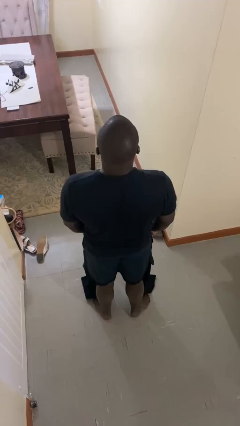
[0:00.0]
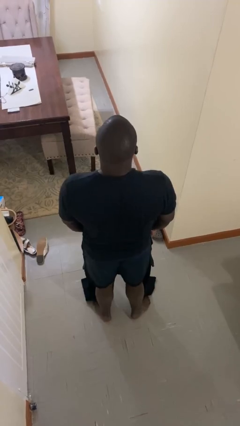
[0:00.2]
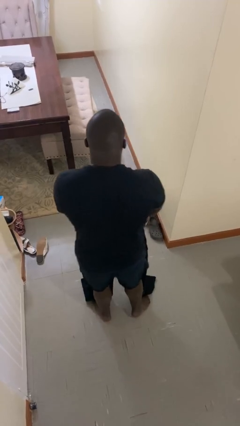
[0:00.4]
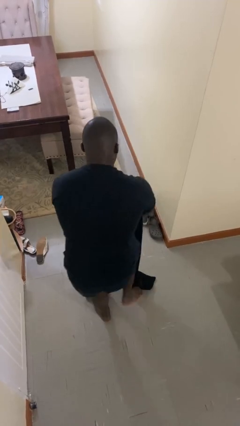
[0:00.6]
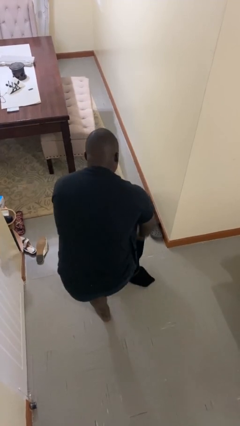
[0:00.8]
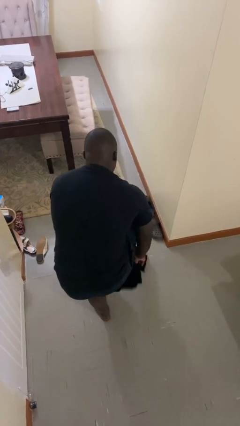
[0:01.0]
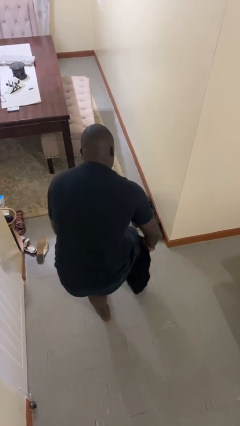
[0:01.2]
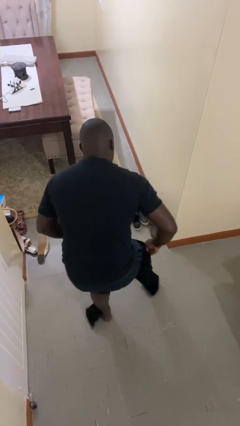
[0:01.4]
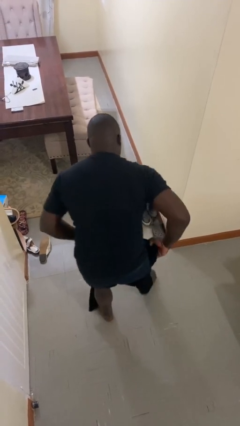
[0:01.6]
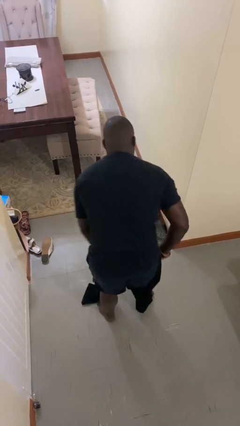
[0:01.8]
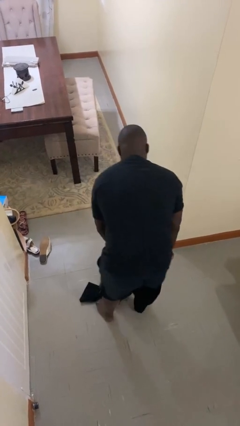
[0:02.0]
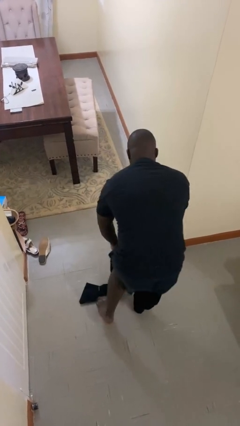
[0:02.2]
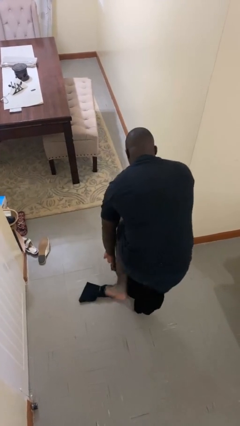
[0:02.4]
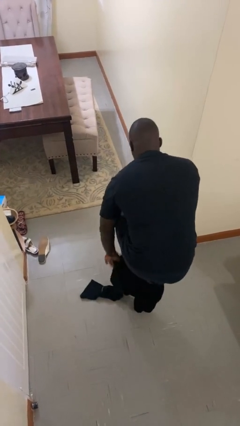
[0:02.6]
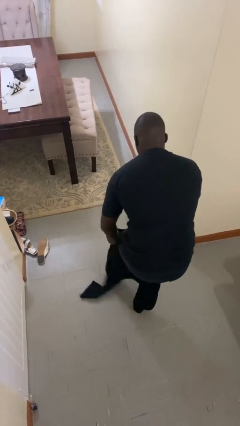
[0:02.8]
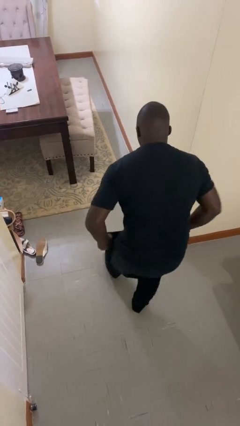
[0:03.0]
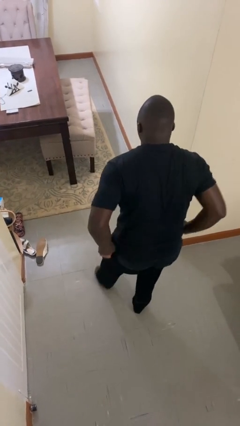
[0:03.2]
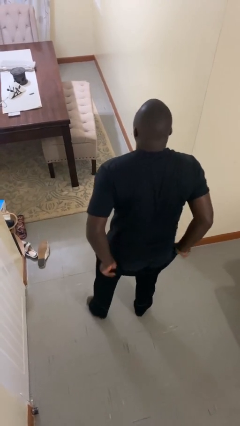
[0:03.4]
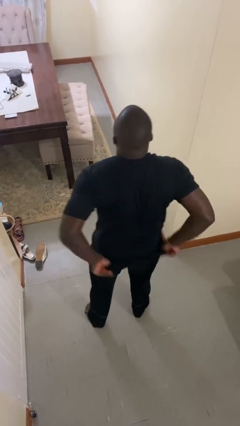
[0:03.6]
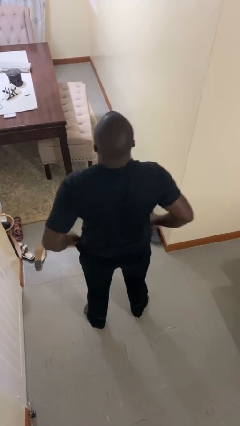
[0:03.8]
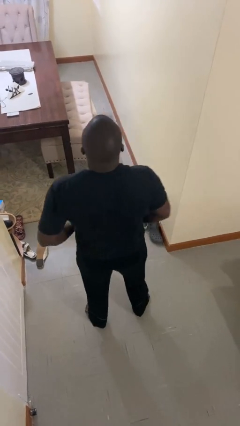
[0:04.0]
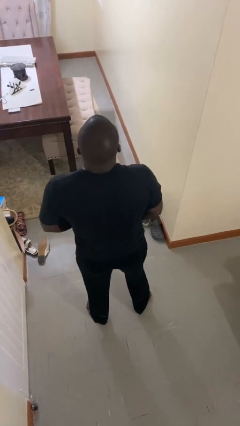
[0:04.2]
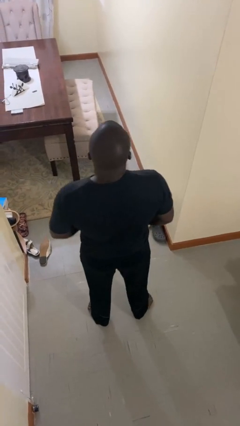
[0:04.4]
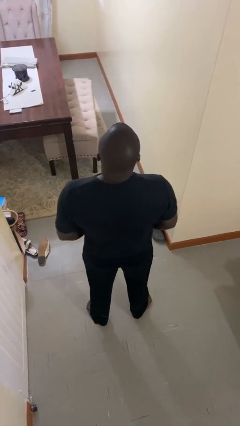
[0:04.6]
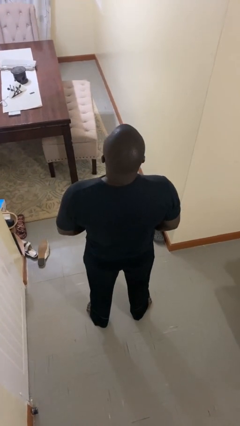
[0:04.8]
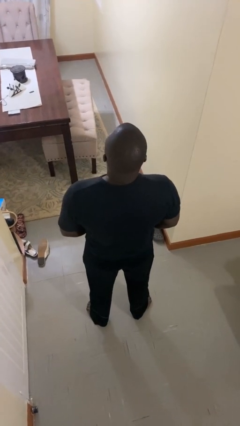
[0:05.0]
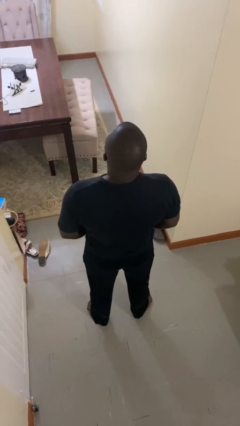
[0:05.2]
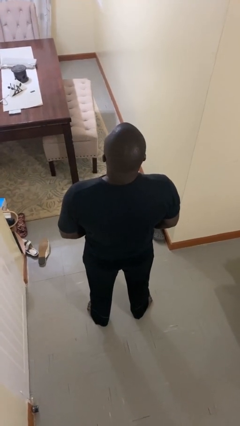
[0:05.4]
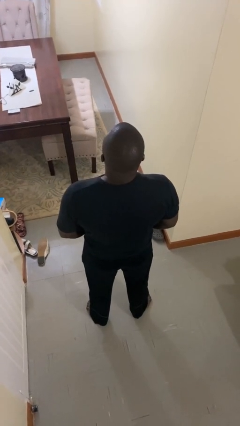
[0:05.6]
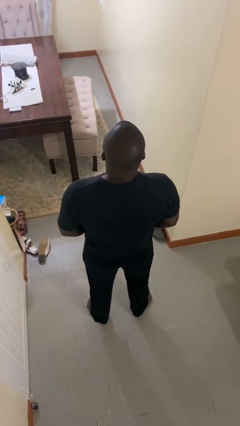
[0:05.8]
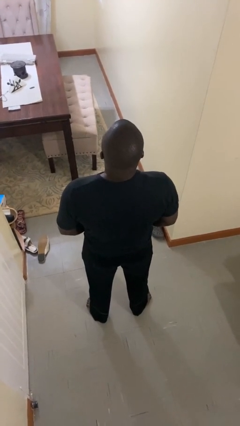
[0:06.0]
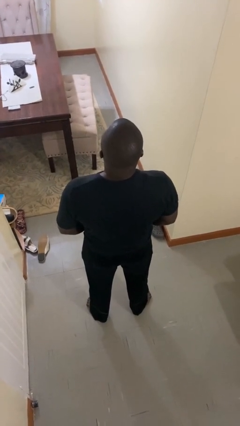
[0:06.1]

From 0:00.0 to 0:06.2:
person takes off pants

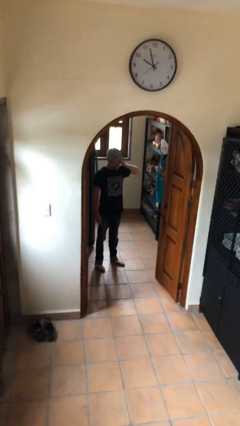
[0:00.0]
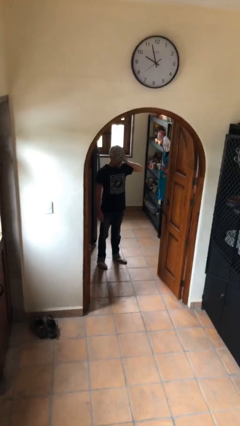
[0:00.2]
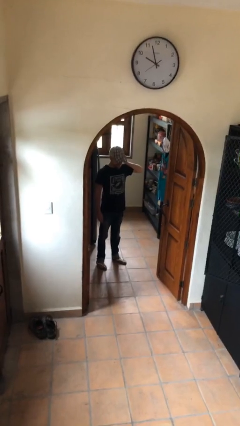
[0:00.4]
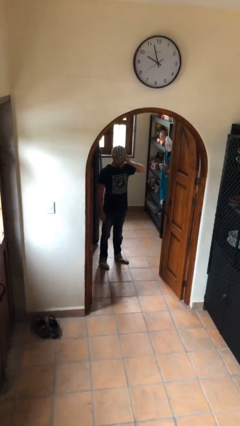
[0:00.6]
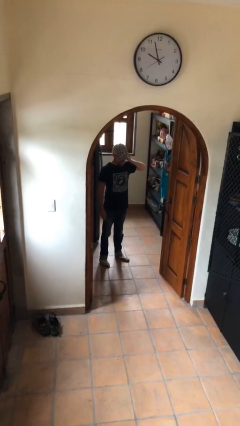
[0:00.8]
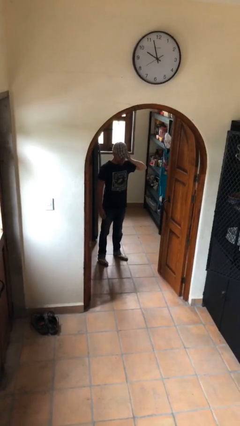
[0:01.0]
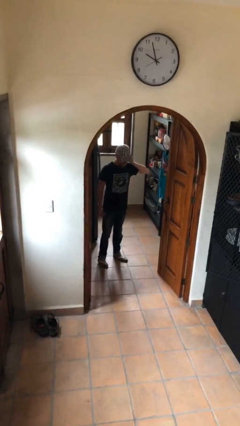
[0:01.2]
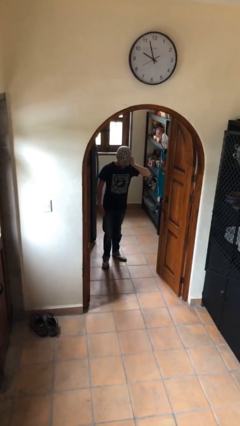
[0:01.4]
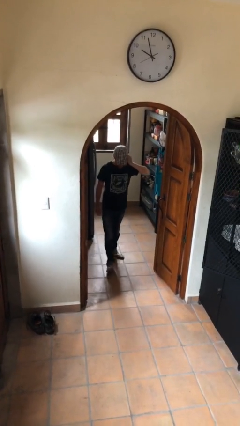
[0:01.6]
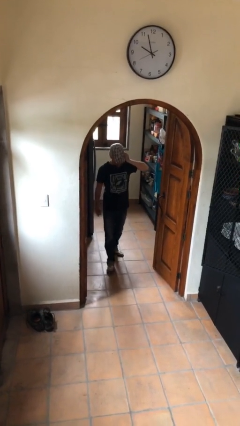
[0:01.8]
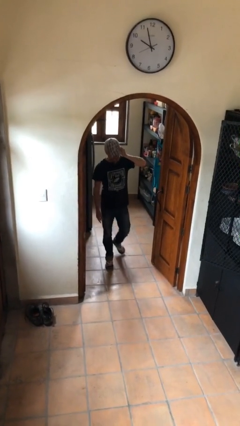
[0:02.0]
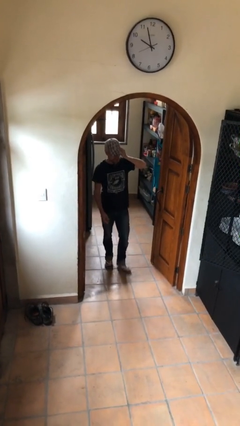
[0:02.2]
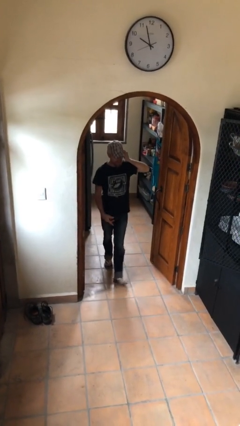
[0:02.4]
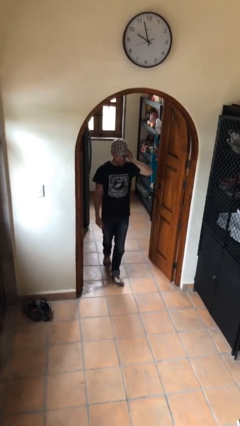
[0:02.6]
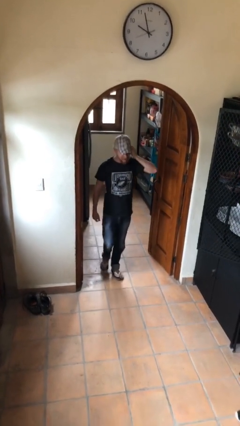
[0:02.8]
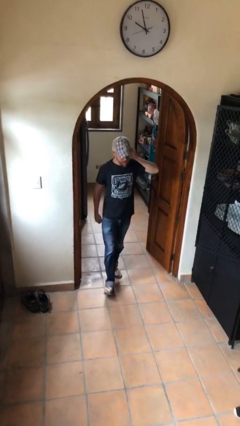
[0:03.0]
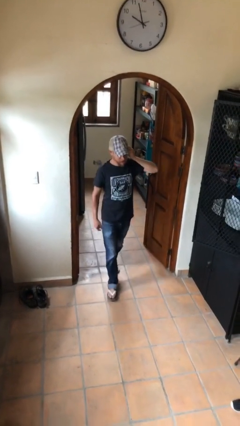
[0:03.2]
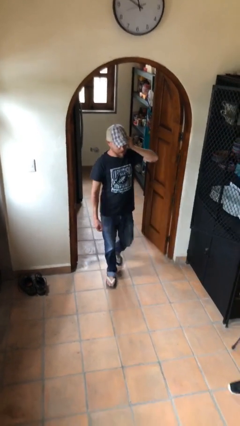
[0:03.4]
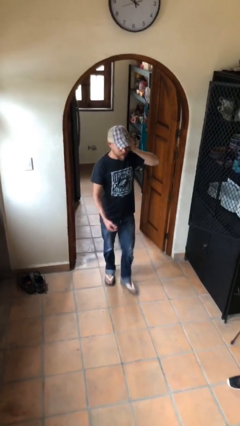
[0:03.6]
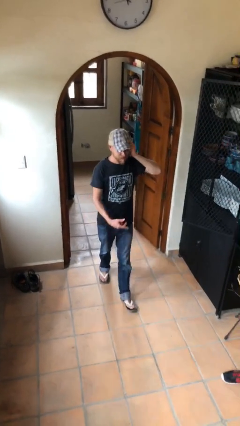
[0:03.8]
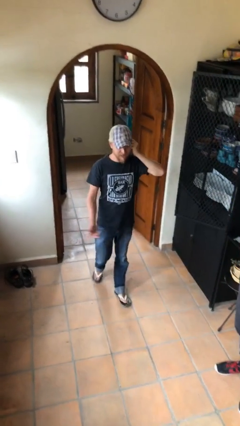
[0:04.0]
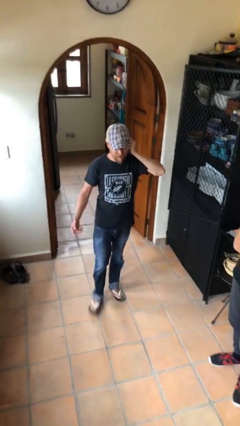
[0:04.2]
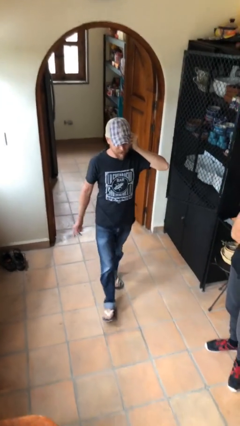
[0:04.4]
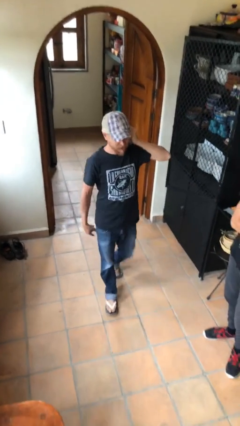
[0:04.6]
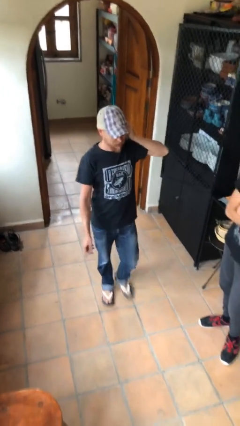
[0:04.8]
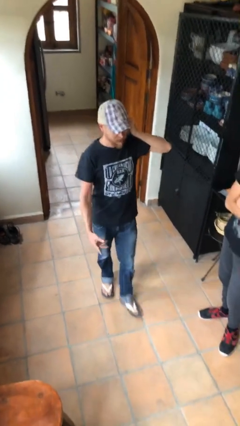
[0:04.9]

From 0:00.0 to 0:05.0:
person enters scene through structure

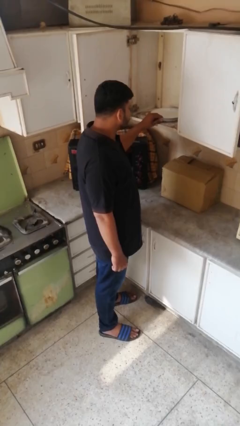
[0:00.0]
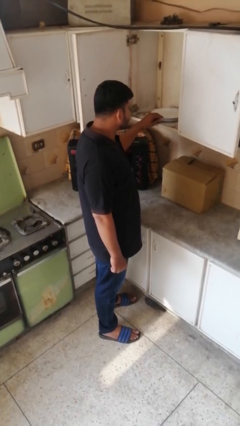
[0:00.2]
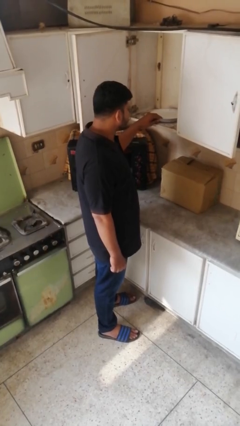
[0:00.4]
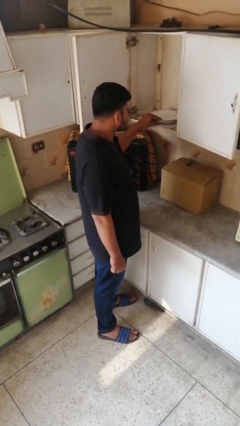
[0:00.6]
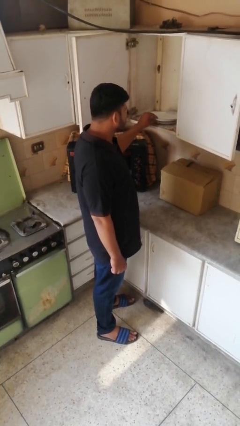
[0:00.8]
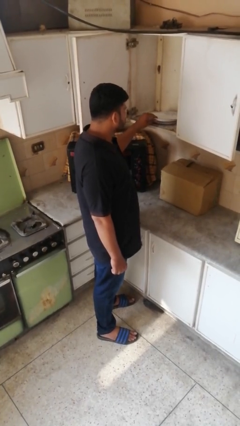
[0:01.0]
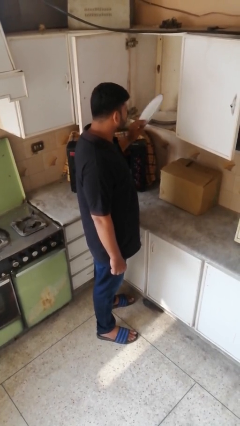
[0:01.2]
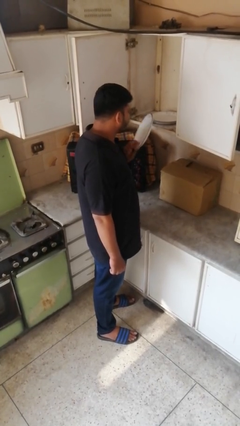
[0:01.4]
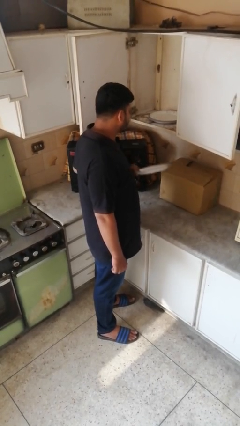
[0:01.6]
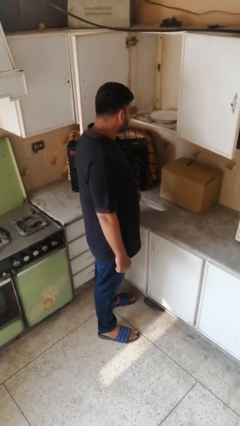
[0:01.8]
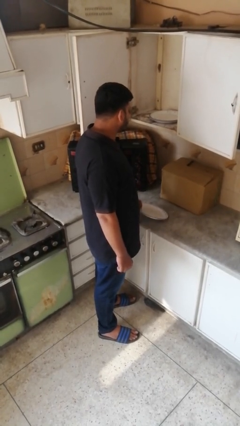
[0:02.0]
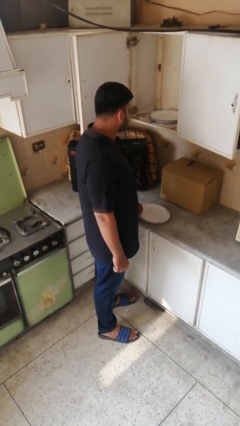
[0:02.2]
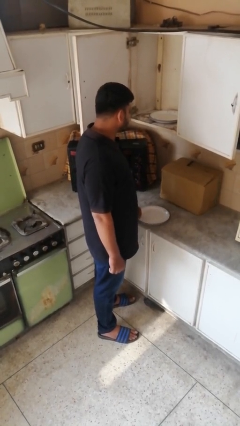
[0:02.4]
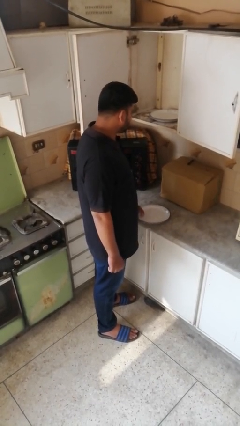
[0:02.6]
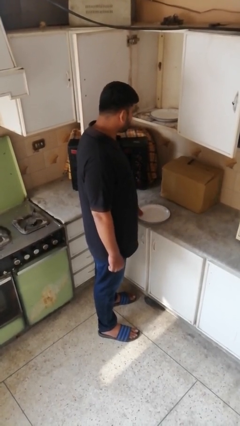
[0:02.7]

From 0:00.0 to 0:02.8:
person takes object from cabinet

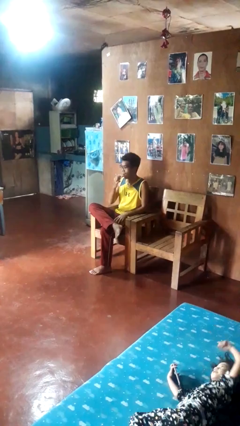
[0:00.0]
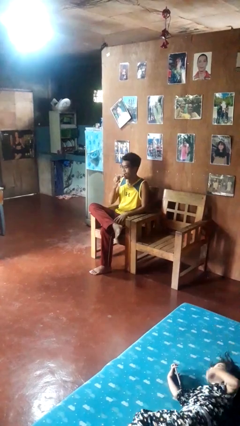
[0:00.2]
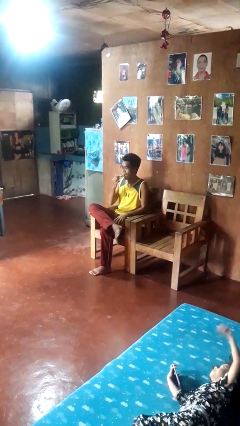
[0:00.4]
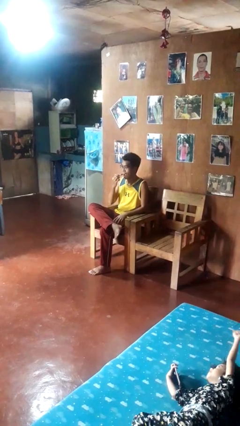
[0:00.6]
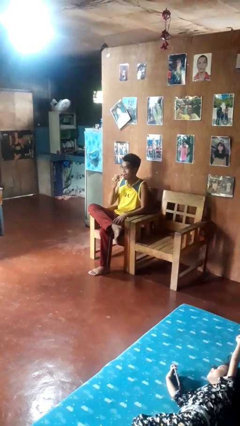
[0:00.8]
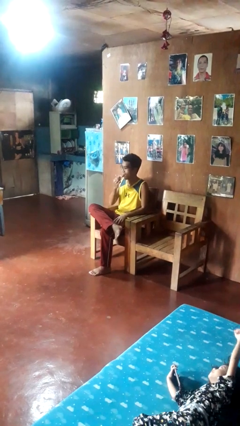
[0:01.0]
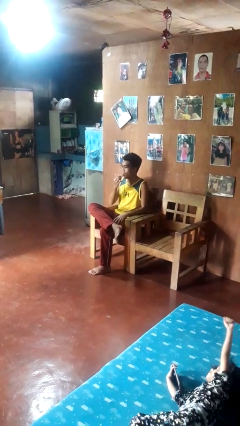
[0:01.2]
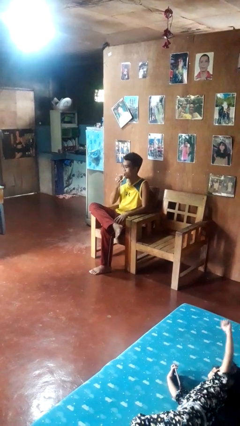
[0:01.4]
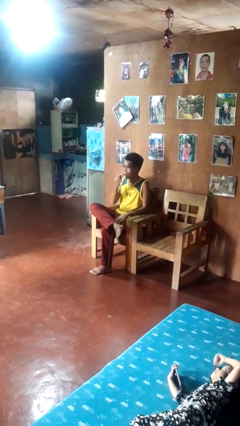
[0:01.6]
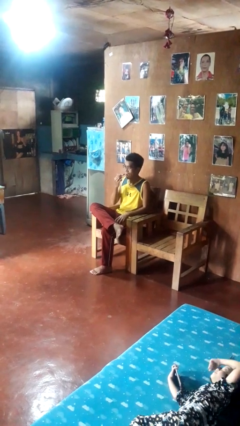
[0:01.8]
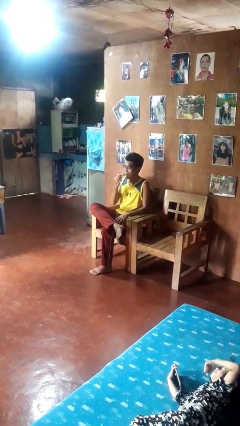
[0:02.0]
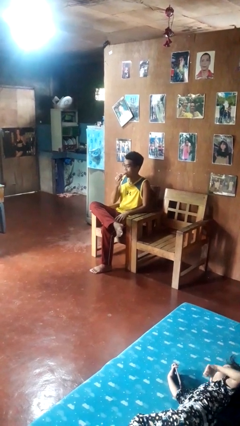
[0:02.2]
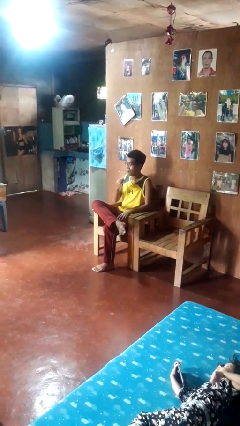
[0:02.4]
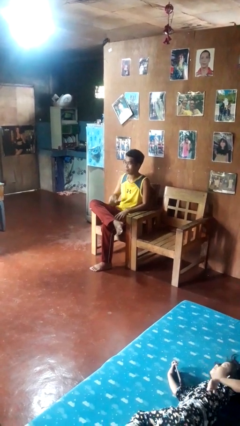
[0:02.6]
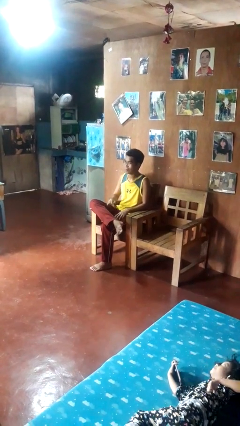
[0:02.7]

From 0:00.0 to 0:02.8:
person applies lip makeup

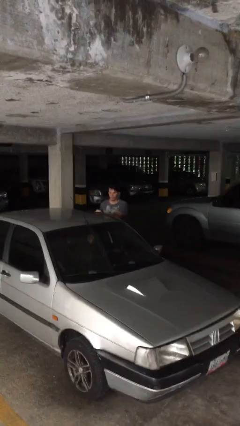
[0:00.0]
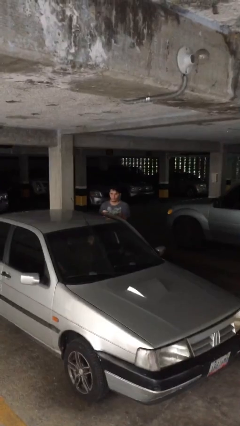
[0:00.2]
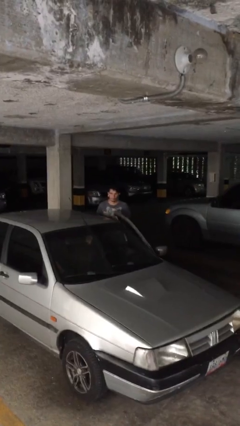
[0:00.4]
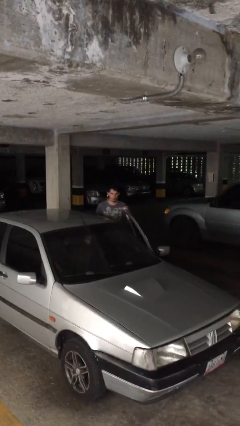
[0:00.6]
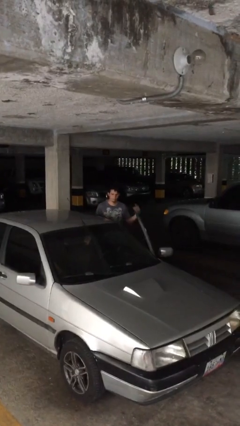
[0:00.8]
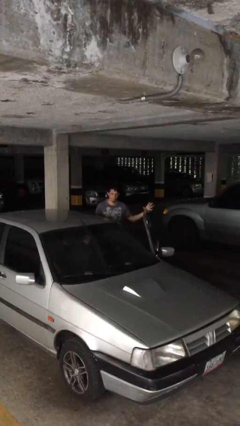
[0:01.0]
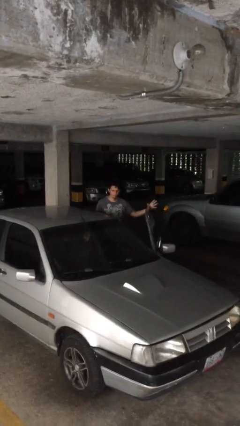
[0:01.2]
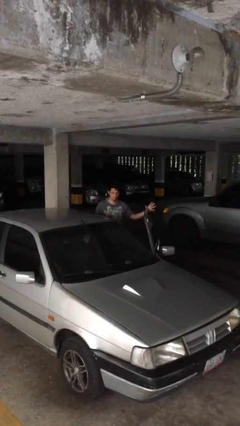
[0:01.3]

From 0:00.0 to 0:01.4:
person opens car door
